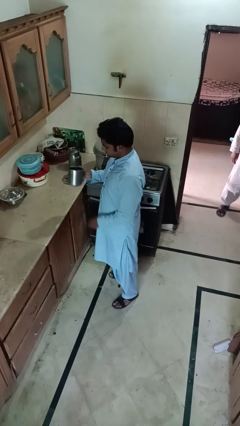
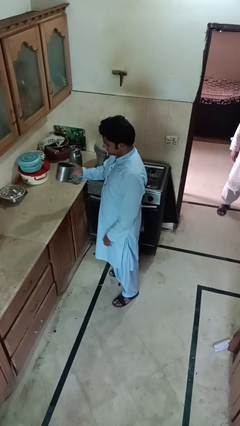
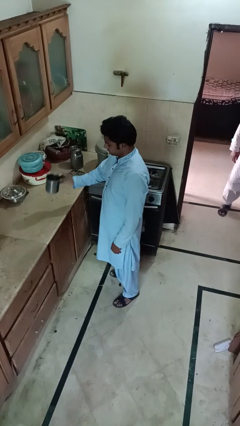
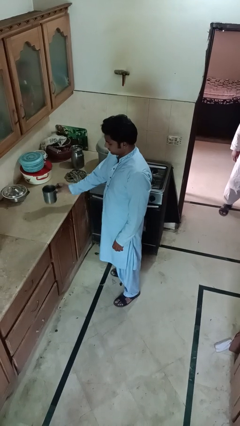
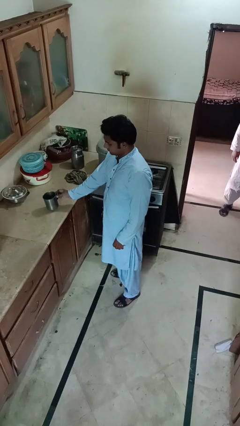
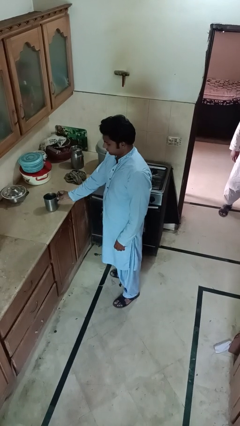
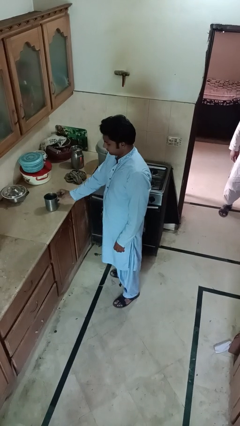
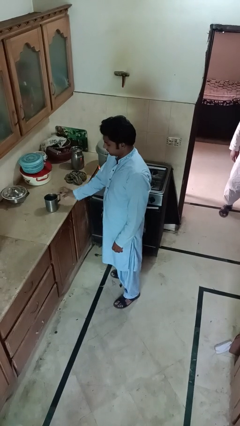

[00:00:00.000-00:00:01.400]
person puts down object on countertop

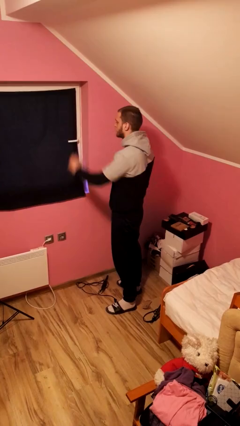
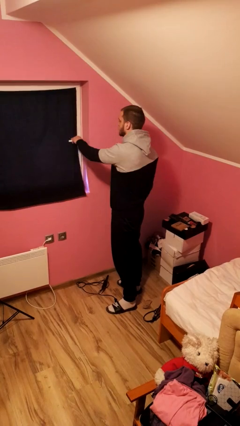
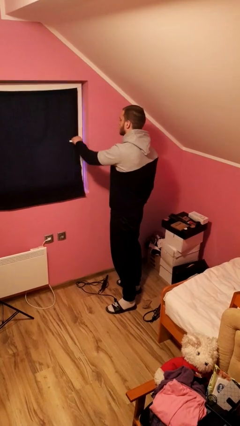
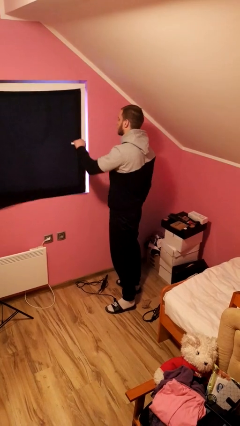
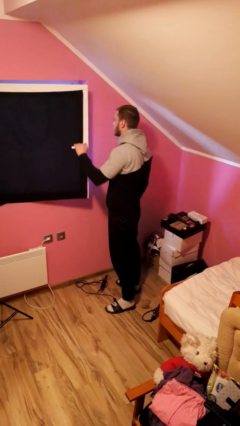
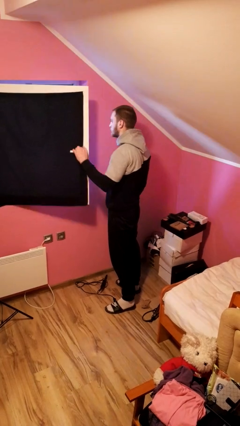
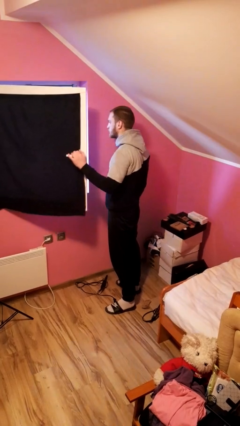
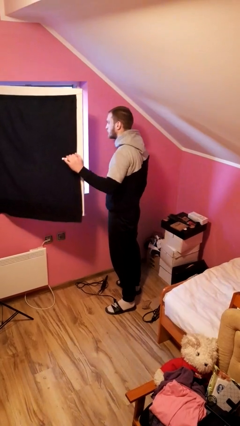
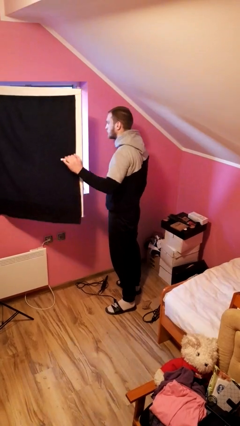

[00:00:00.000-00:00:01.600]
person opens home window

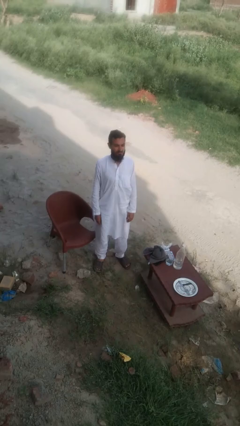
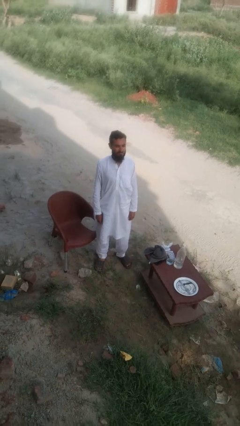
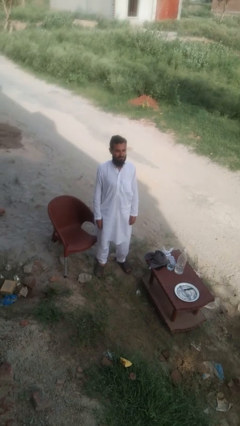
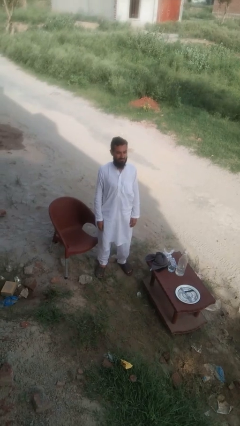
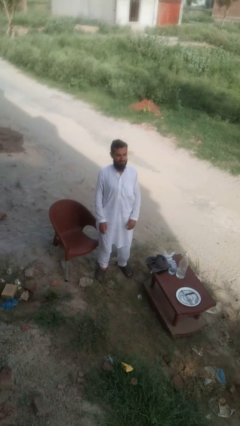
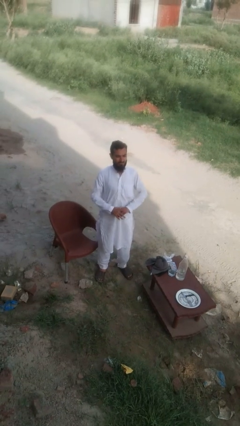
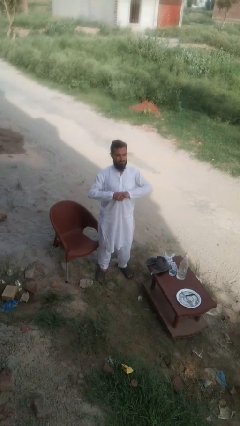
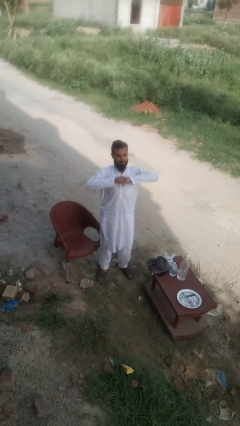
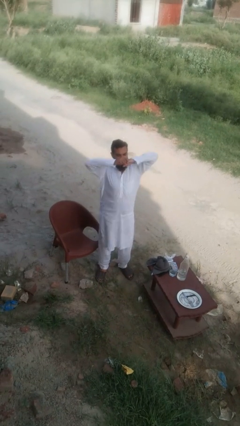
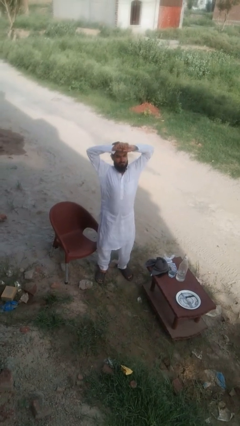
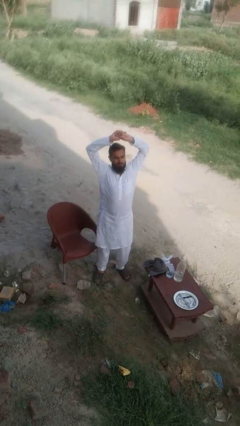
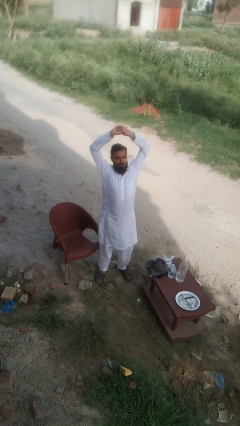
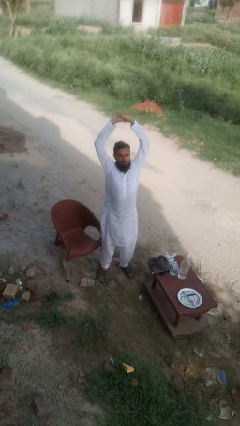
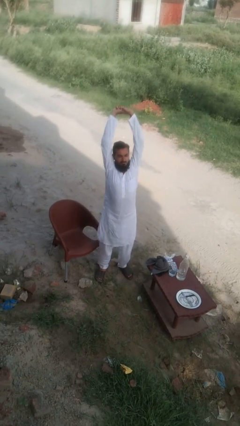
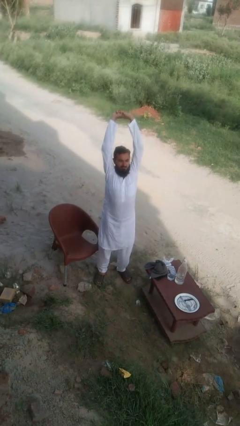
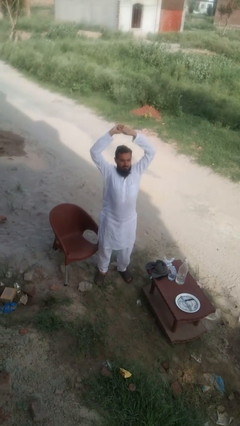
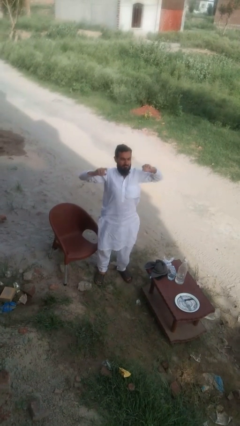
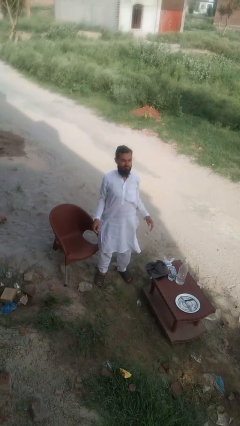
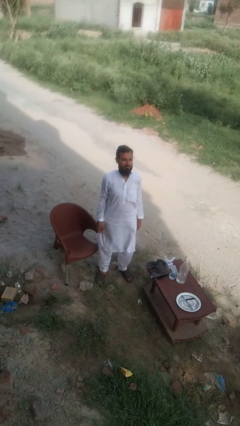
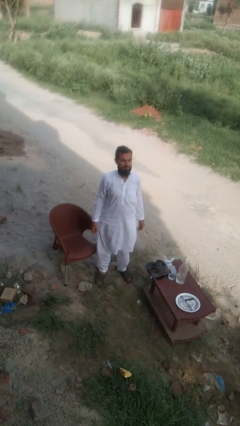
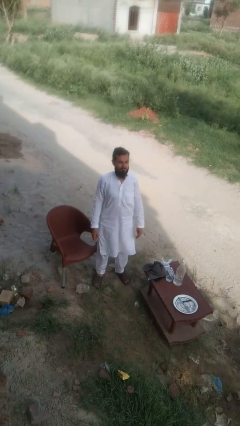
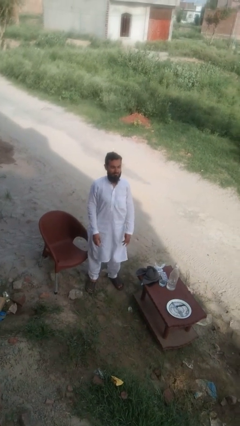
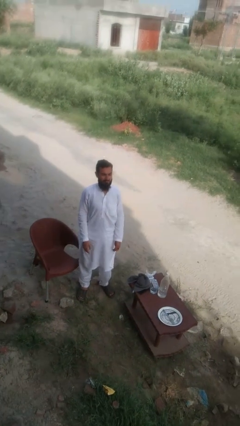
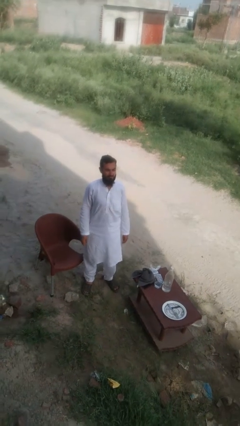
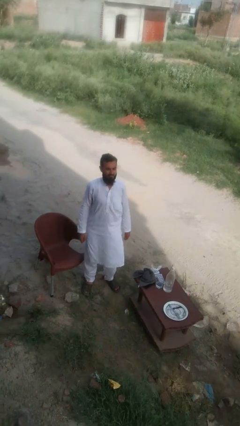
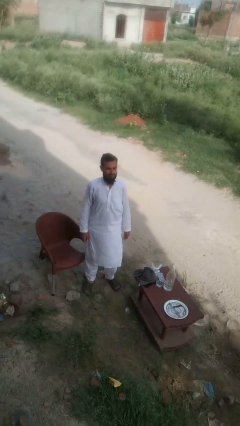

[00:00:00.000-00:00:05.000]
person stretches arms over head

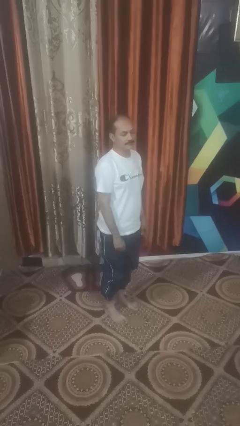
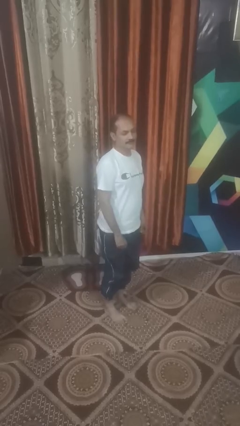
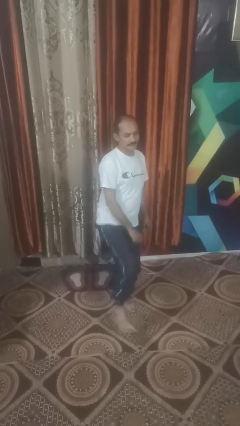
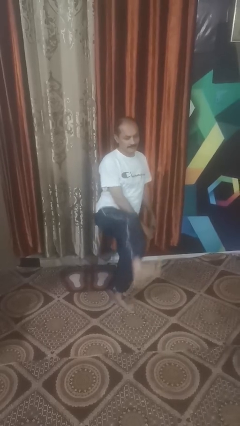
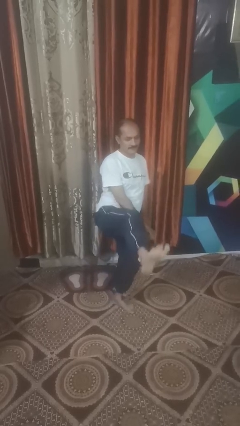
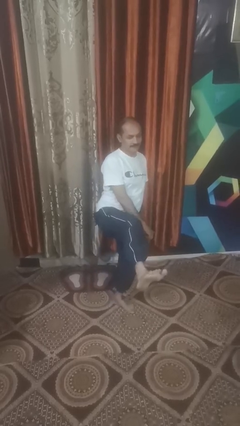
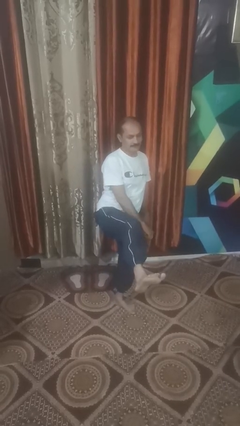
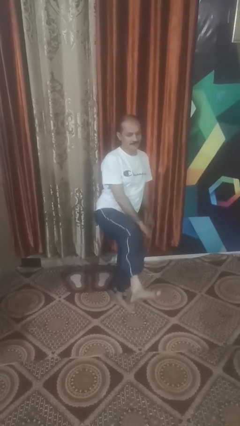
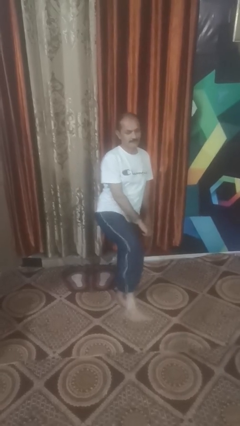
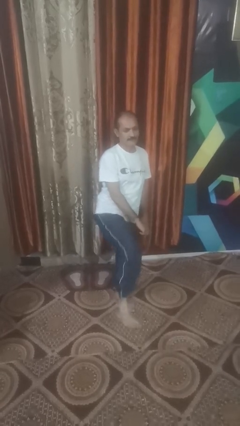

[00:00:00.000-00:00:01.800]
person karate kicks

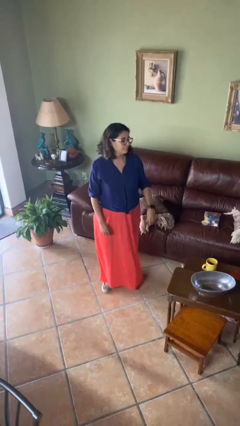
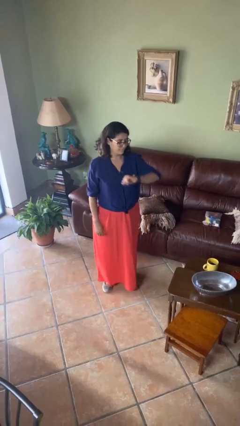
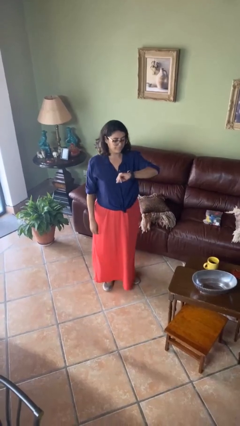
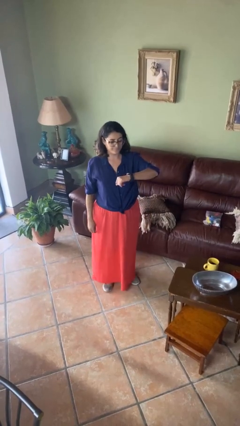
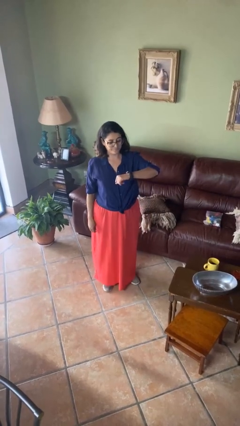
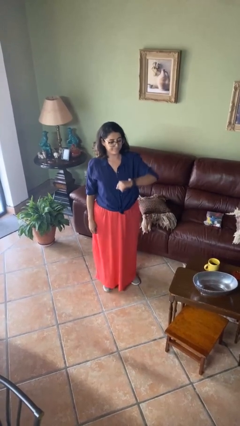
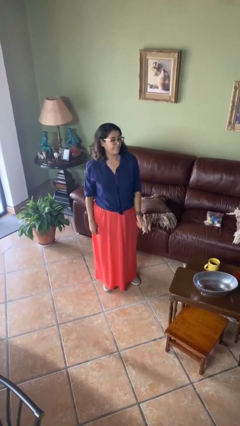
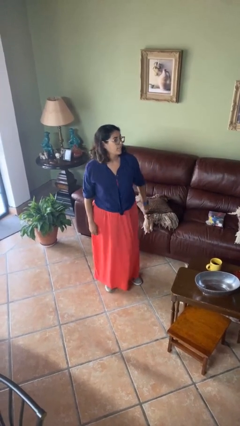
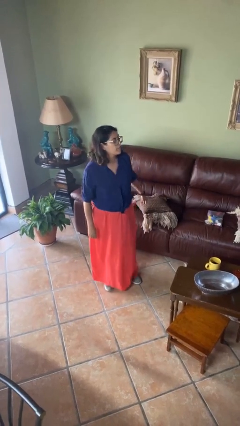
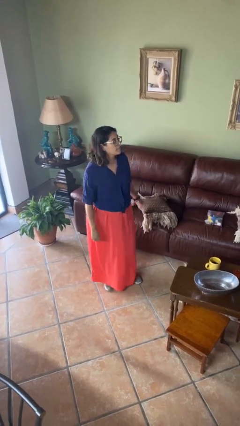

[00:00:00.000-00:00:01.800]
person looks at wristwatch

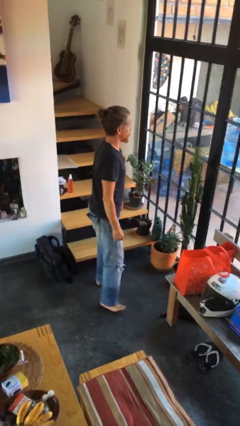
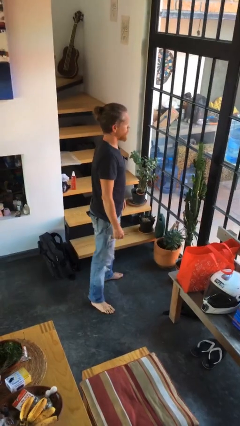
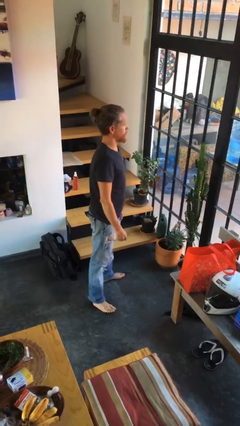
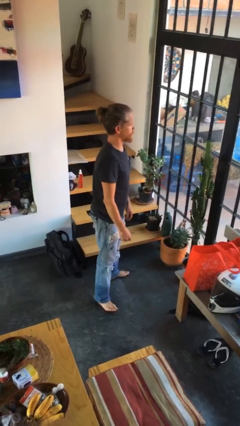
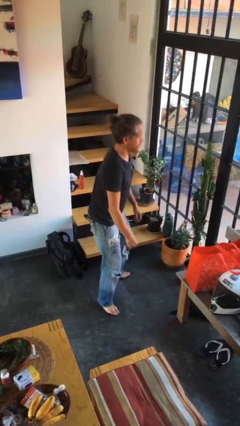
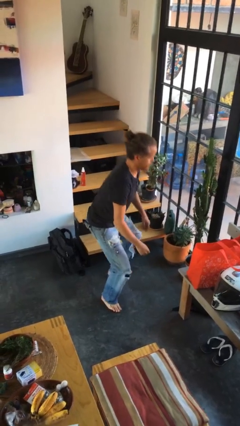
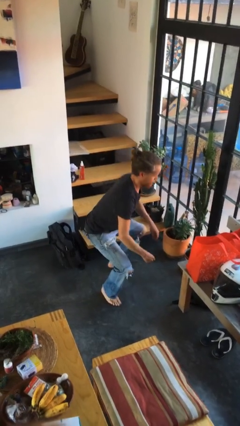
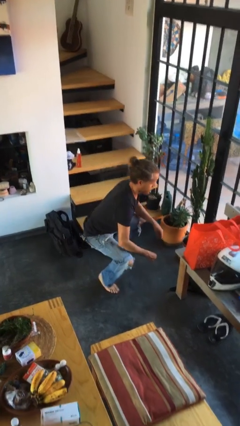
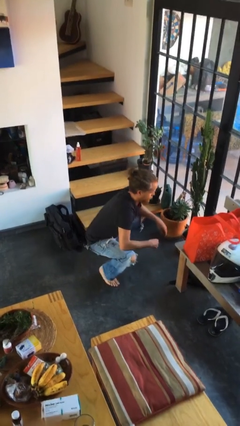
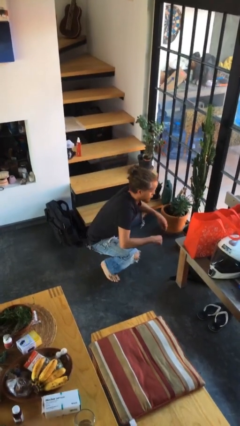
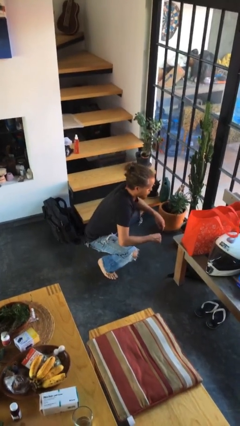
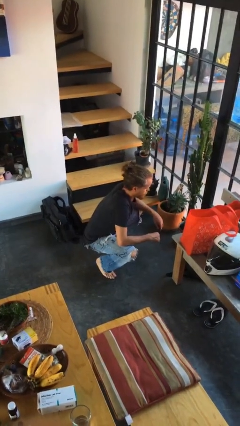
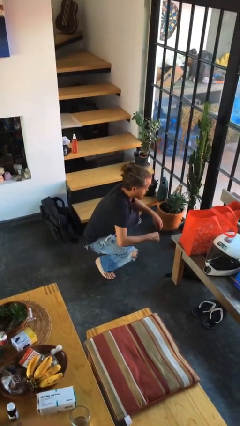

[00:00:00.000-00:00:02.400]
person squats

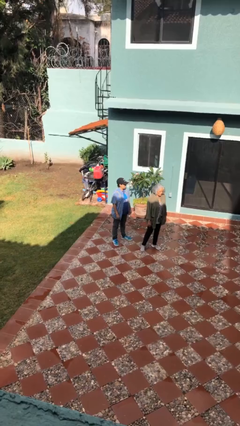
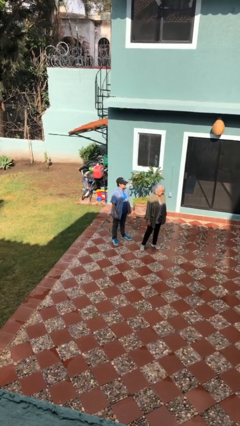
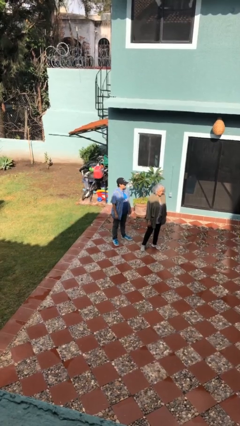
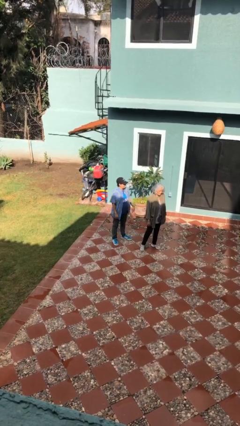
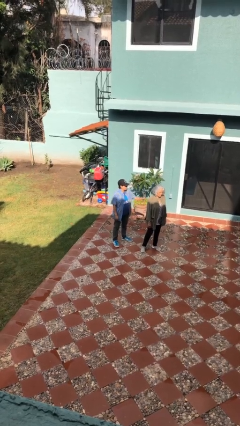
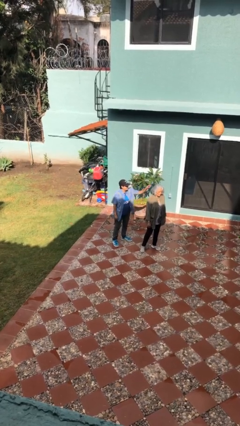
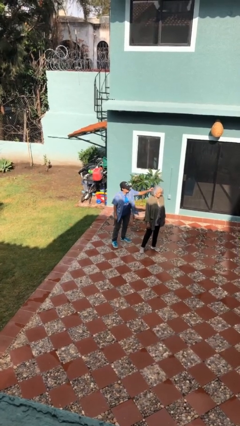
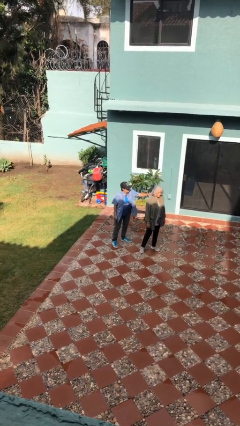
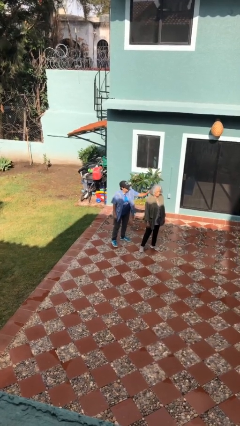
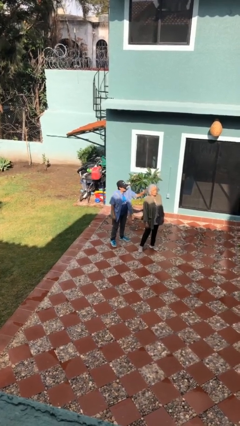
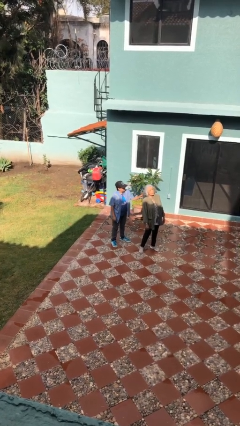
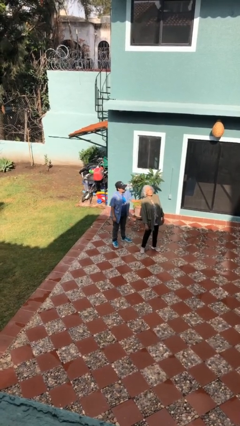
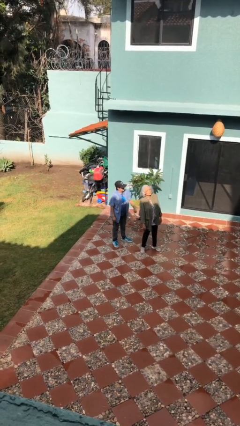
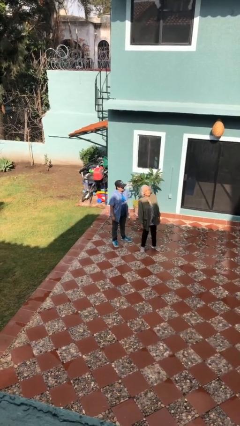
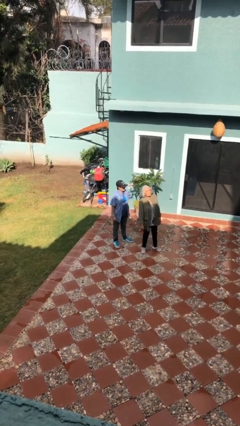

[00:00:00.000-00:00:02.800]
person grabs person by hair
